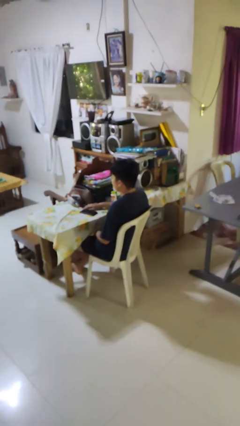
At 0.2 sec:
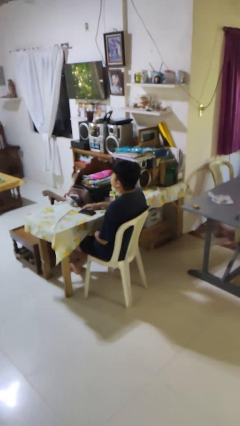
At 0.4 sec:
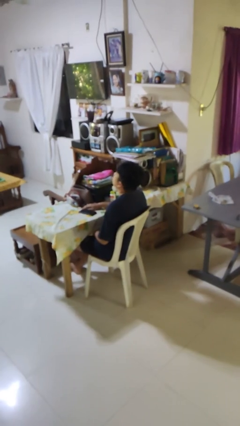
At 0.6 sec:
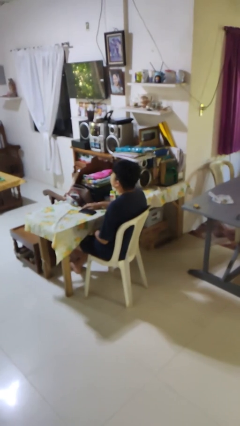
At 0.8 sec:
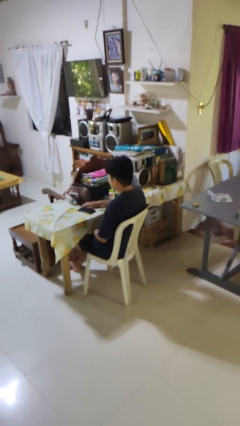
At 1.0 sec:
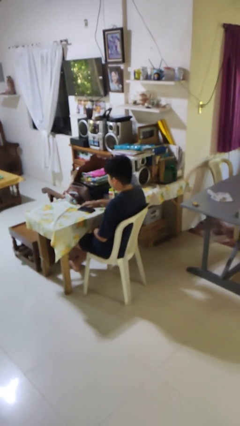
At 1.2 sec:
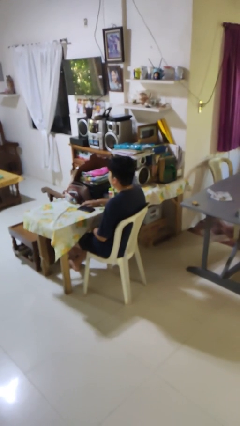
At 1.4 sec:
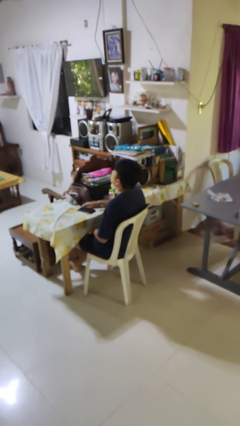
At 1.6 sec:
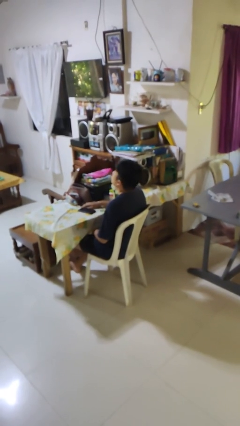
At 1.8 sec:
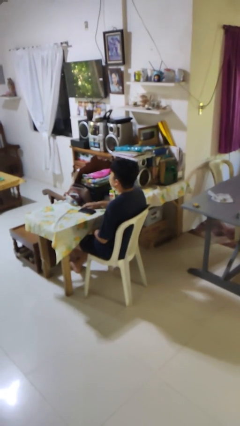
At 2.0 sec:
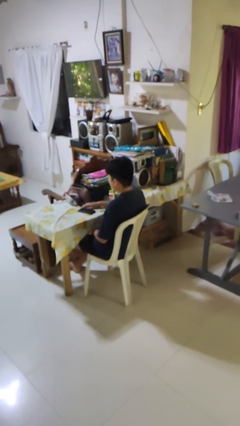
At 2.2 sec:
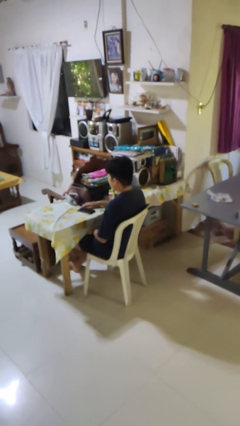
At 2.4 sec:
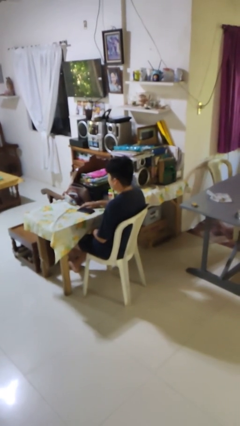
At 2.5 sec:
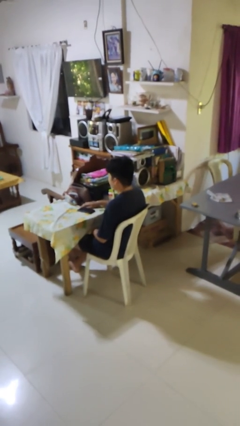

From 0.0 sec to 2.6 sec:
person nods head

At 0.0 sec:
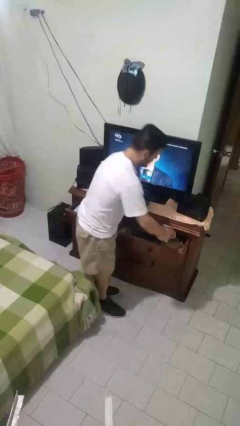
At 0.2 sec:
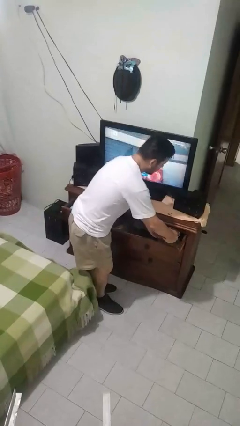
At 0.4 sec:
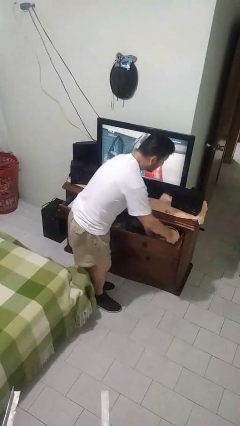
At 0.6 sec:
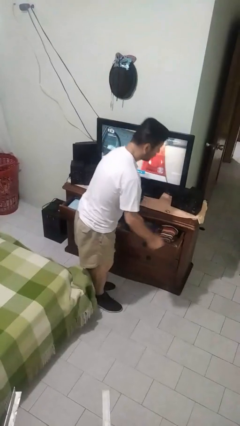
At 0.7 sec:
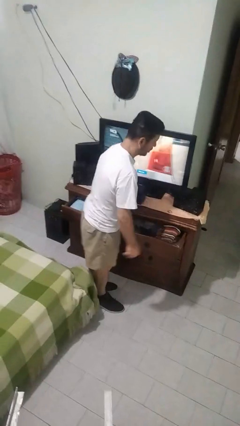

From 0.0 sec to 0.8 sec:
person puts clothes into dresser

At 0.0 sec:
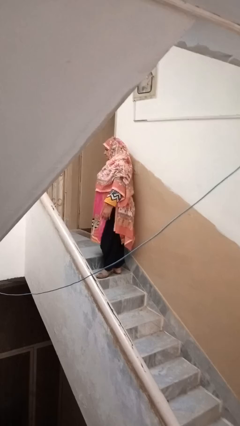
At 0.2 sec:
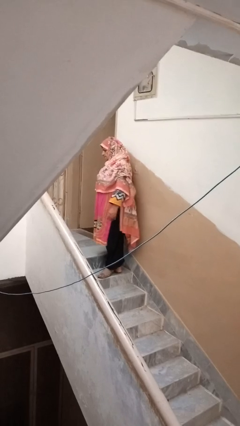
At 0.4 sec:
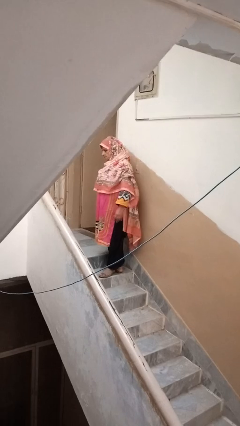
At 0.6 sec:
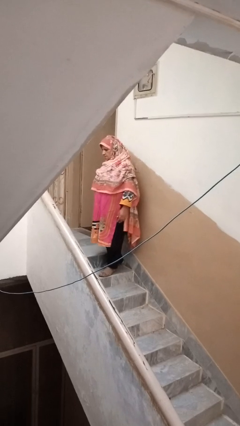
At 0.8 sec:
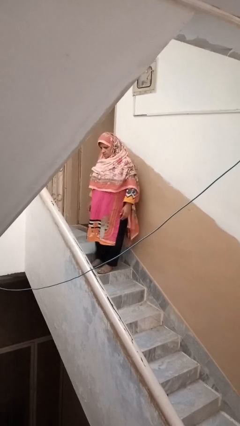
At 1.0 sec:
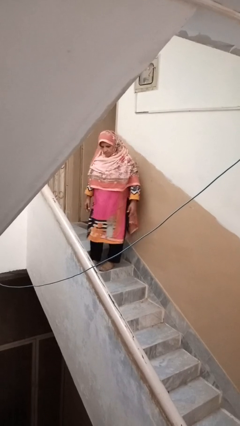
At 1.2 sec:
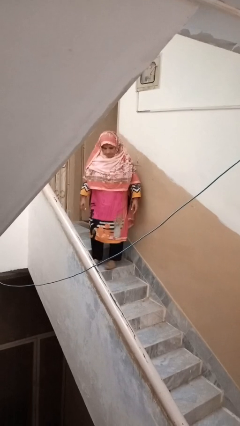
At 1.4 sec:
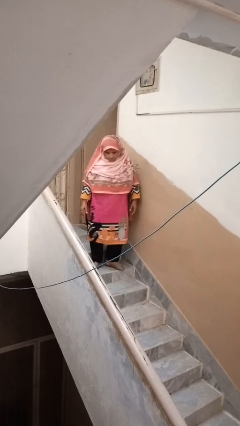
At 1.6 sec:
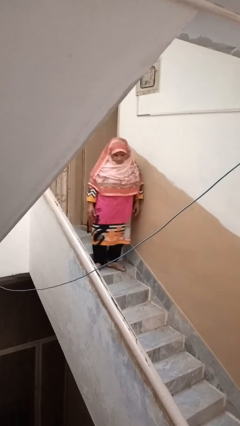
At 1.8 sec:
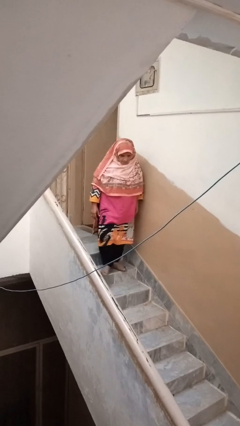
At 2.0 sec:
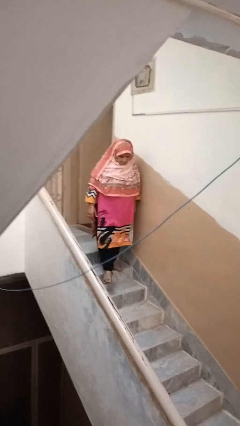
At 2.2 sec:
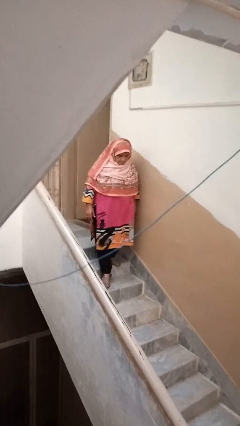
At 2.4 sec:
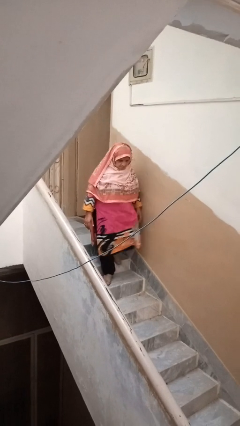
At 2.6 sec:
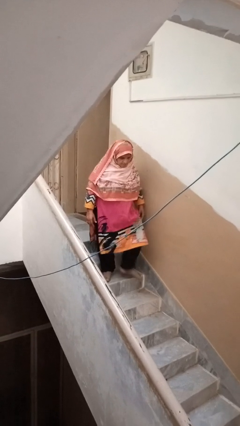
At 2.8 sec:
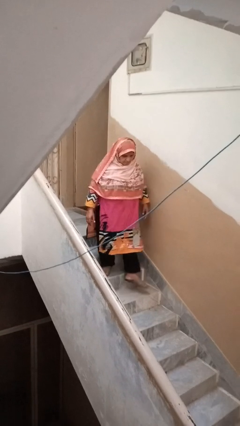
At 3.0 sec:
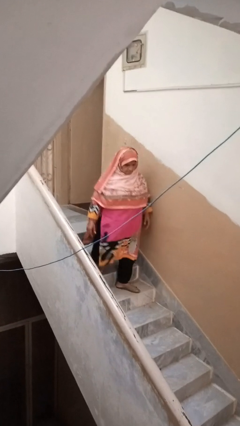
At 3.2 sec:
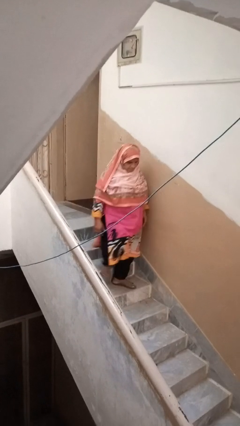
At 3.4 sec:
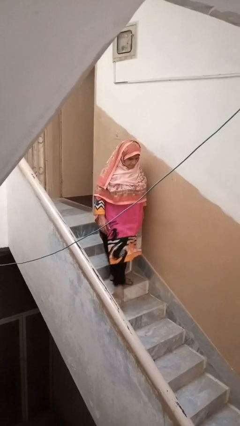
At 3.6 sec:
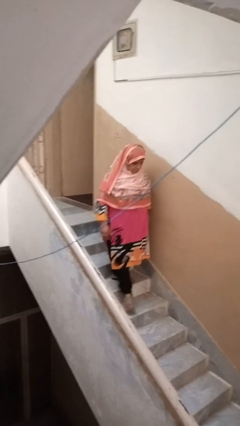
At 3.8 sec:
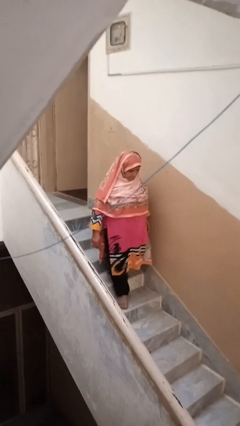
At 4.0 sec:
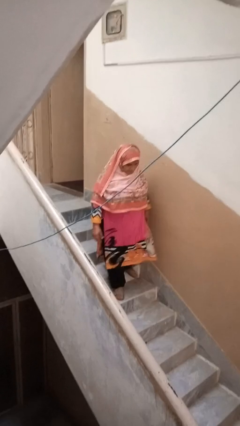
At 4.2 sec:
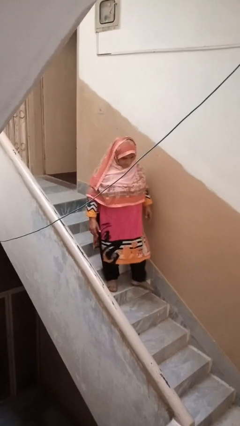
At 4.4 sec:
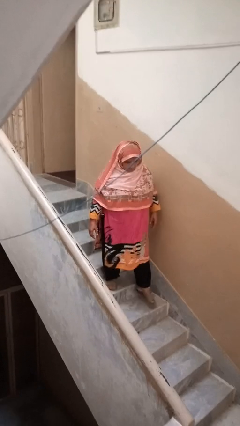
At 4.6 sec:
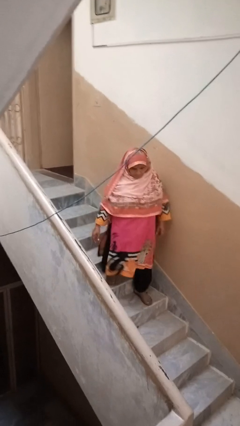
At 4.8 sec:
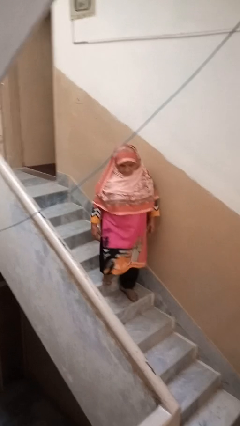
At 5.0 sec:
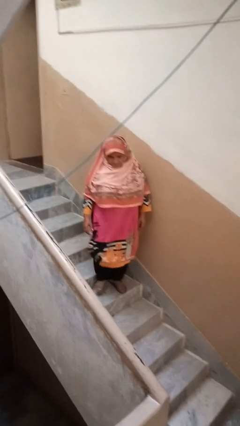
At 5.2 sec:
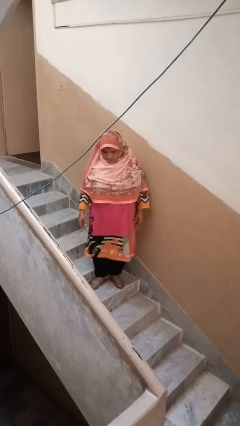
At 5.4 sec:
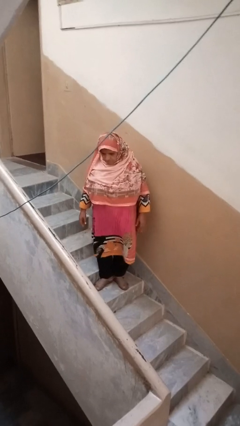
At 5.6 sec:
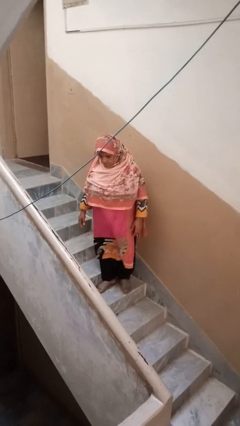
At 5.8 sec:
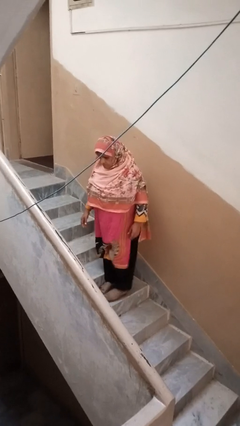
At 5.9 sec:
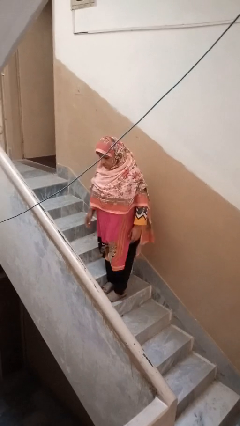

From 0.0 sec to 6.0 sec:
person climbs down stairs

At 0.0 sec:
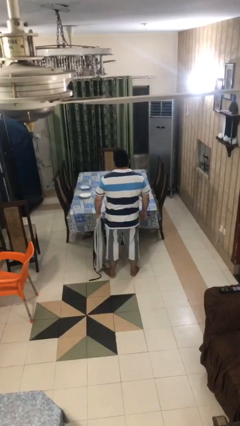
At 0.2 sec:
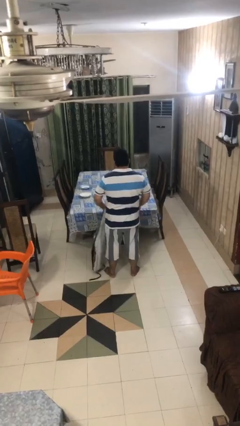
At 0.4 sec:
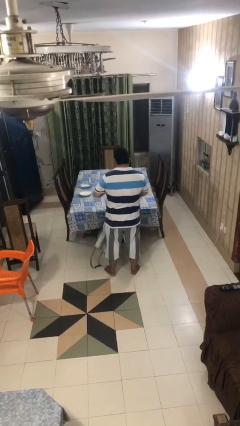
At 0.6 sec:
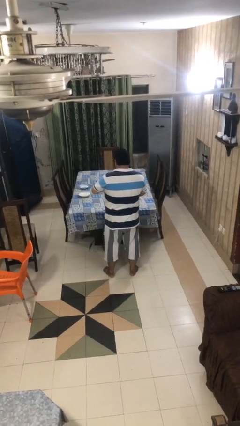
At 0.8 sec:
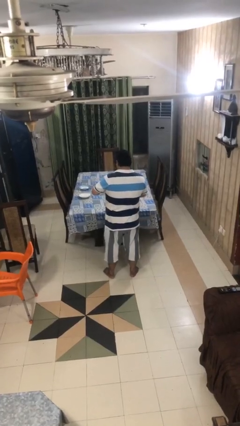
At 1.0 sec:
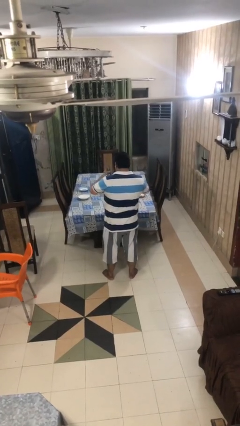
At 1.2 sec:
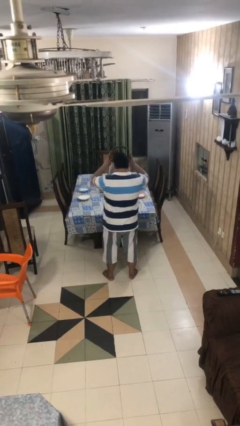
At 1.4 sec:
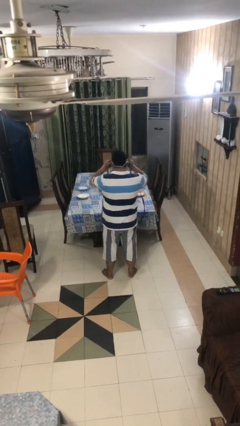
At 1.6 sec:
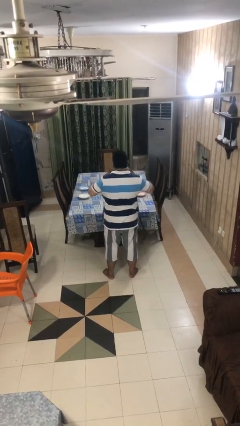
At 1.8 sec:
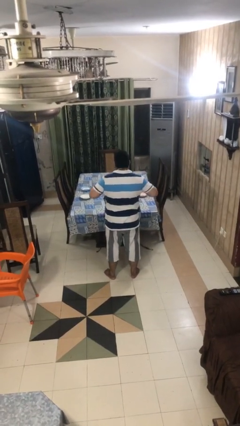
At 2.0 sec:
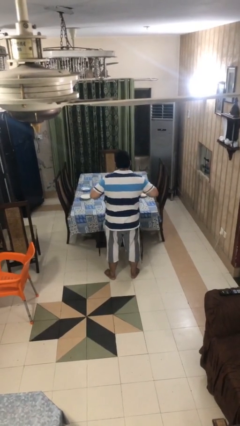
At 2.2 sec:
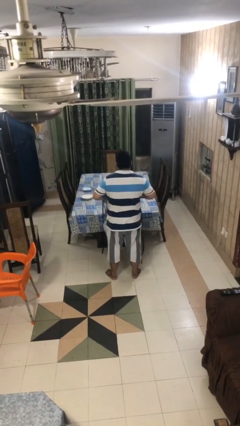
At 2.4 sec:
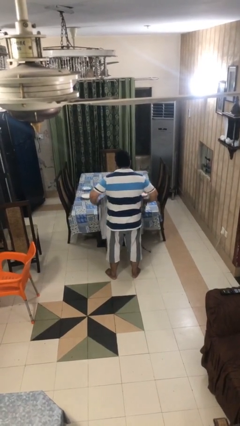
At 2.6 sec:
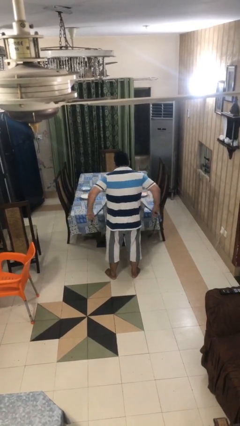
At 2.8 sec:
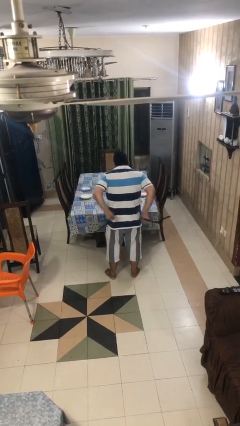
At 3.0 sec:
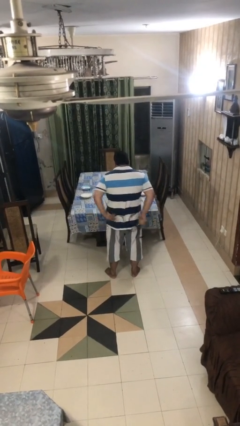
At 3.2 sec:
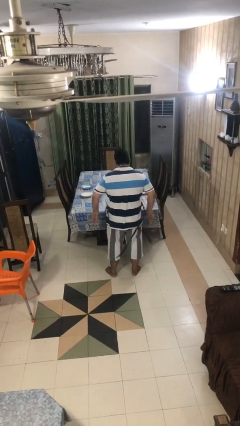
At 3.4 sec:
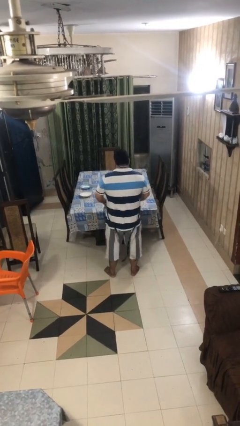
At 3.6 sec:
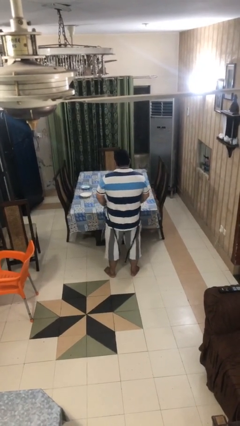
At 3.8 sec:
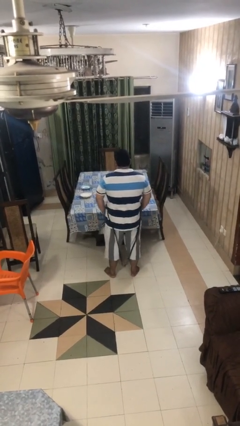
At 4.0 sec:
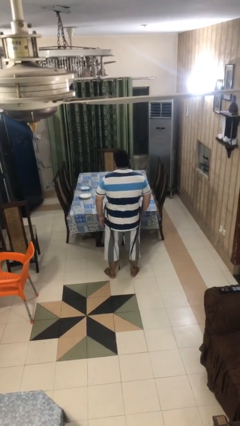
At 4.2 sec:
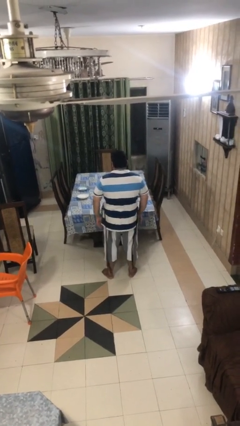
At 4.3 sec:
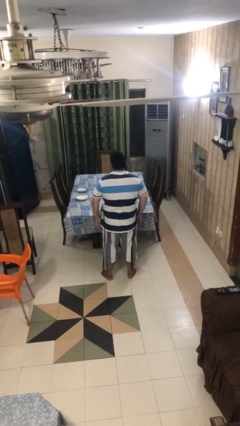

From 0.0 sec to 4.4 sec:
person puts on apron

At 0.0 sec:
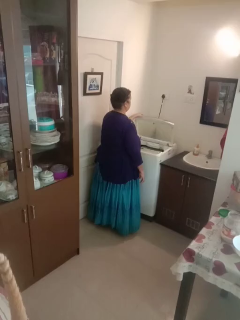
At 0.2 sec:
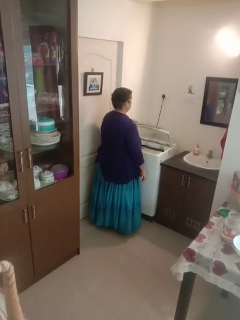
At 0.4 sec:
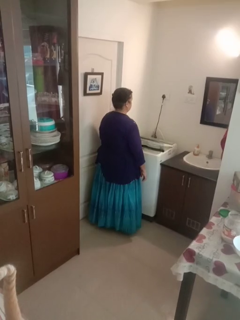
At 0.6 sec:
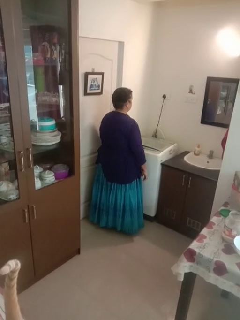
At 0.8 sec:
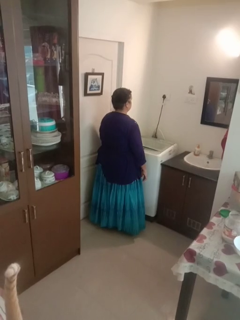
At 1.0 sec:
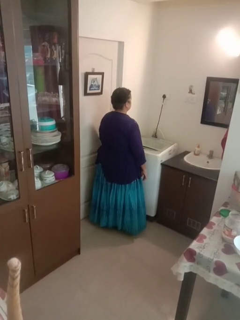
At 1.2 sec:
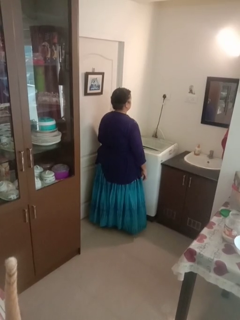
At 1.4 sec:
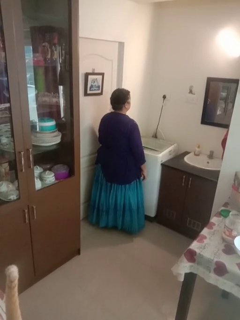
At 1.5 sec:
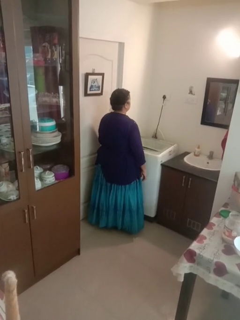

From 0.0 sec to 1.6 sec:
person closes clothes washer

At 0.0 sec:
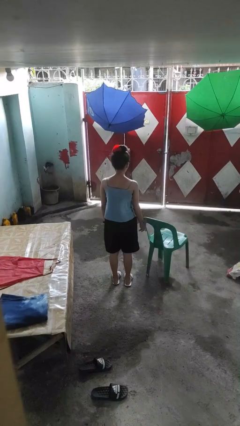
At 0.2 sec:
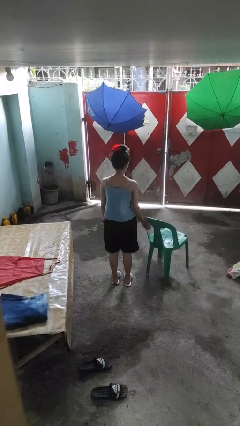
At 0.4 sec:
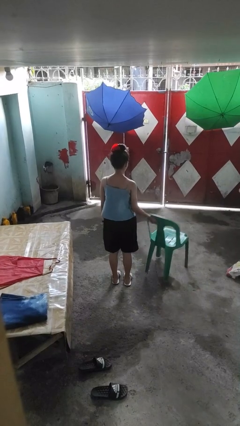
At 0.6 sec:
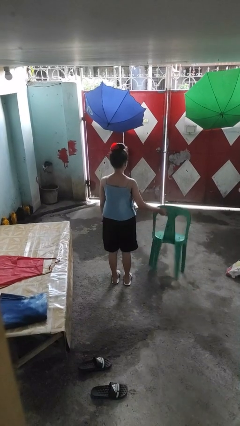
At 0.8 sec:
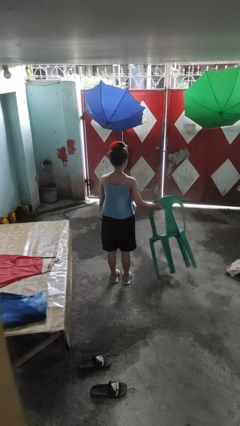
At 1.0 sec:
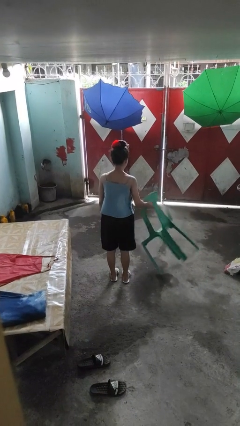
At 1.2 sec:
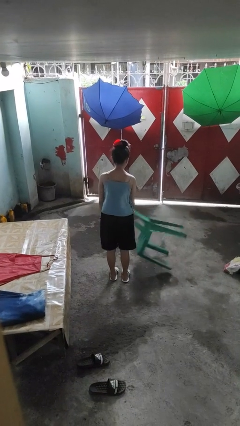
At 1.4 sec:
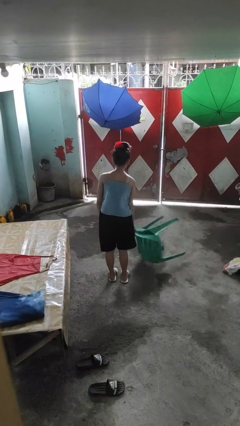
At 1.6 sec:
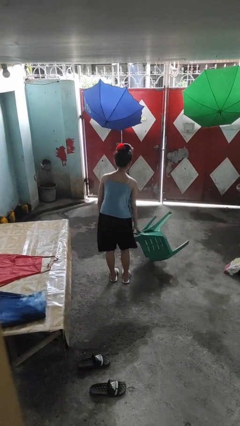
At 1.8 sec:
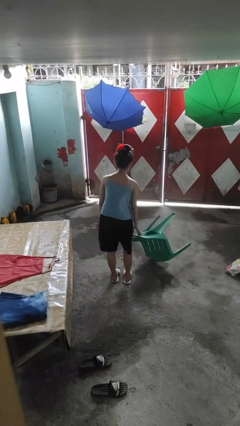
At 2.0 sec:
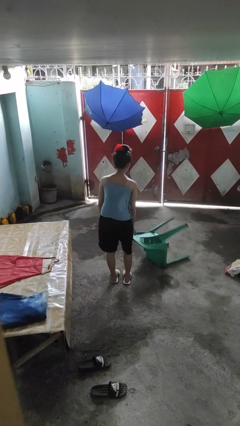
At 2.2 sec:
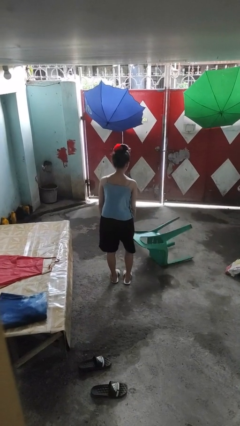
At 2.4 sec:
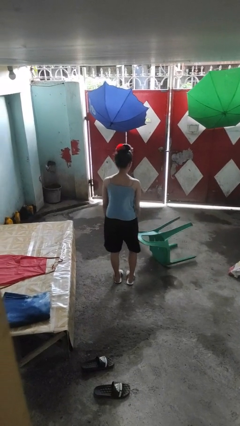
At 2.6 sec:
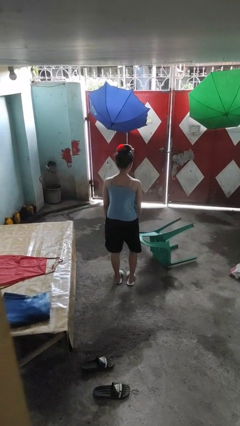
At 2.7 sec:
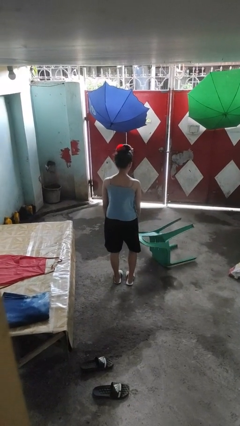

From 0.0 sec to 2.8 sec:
person knocks over furniture
